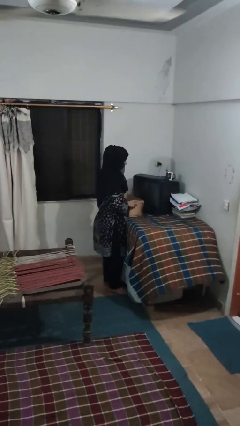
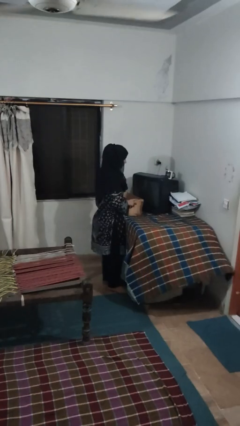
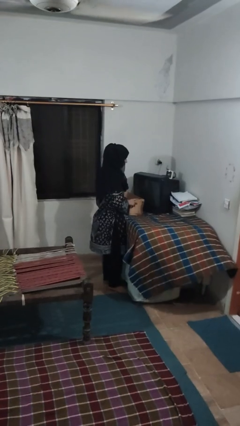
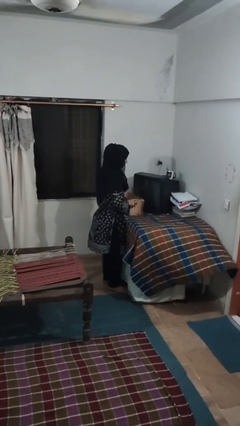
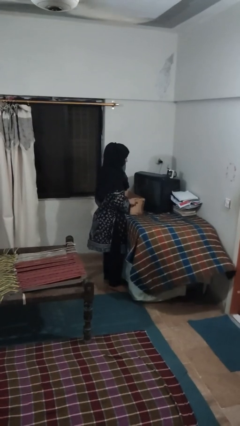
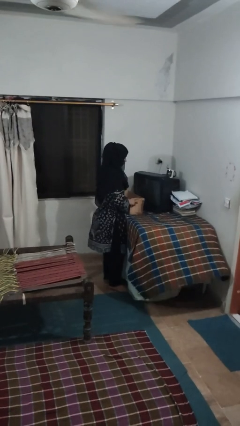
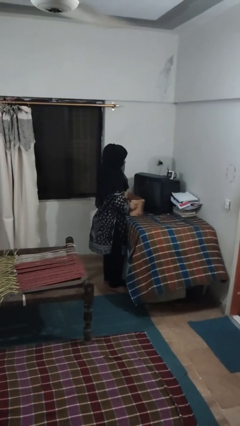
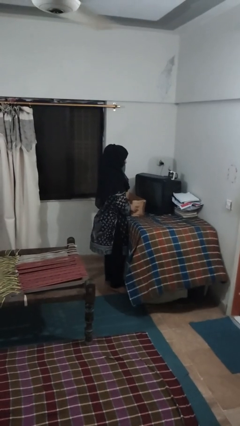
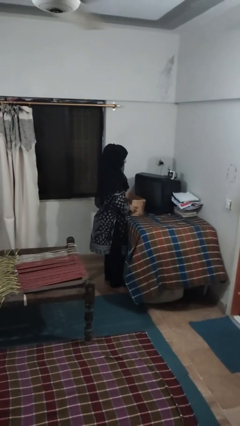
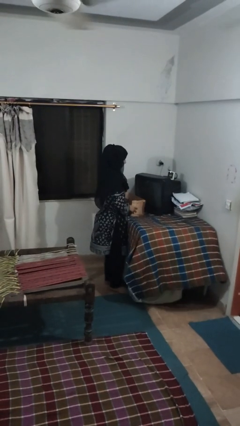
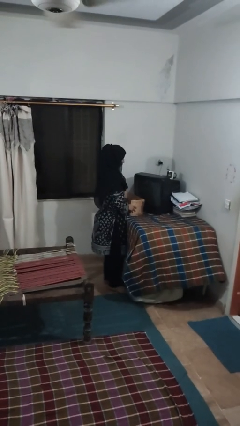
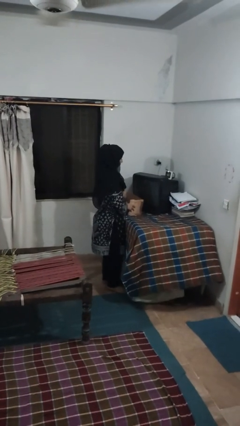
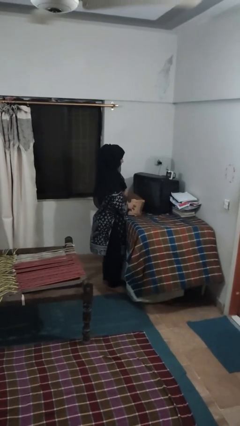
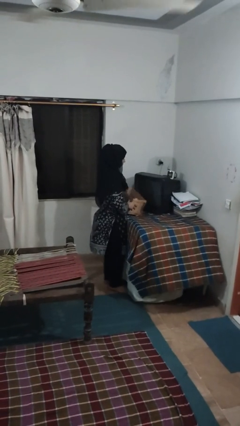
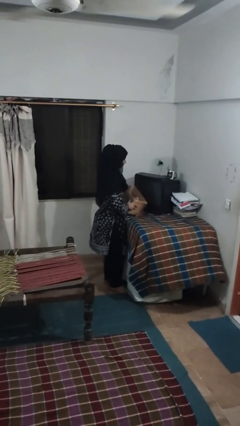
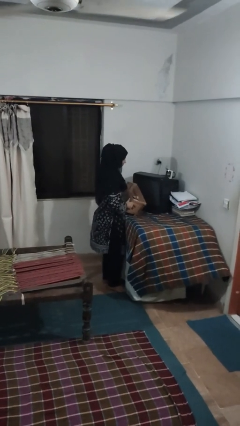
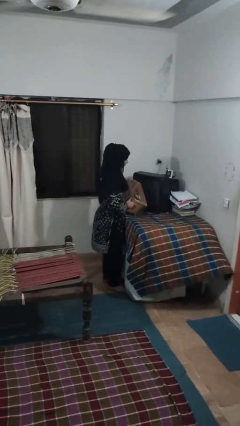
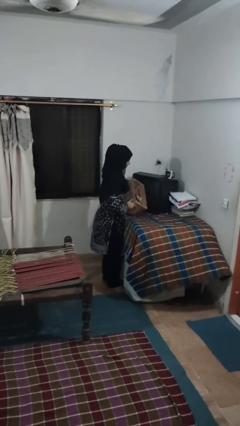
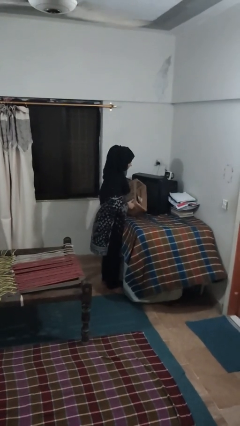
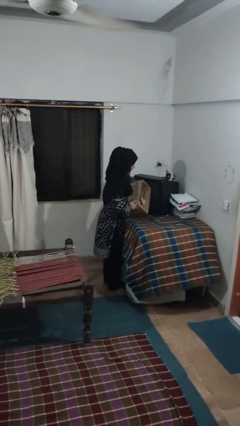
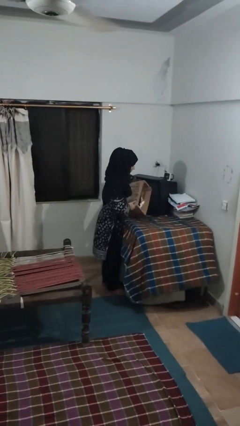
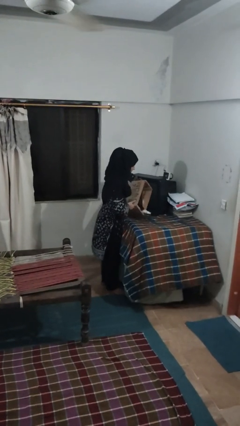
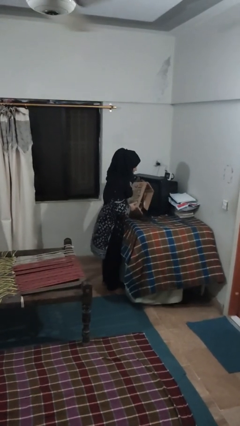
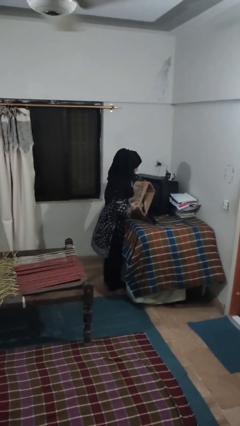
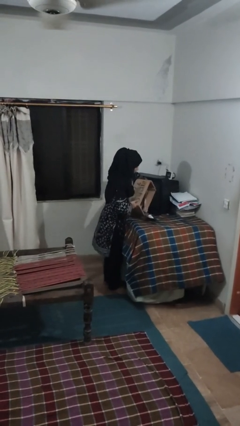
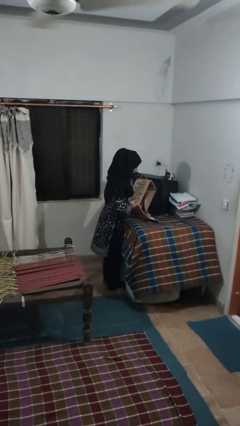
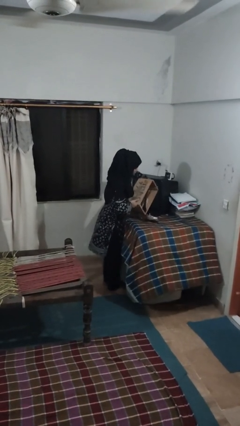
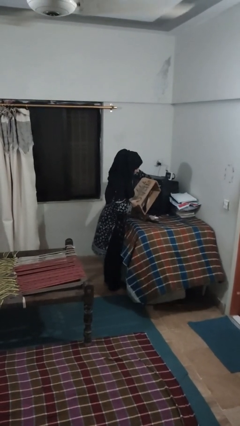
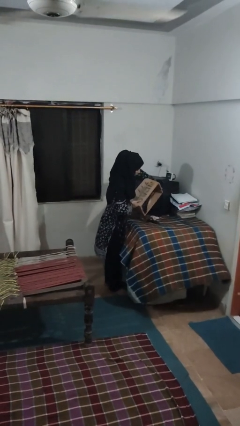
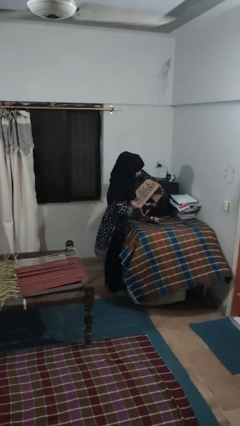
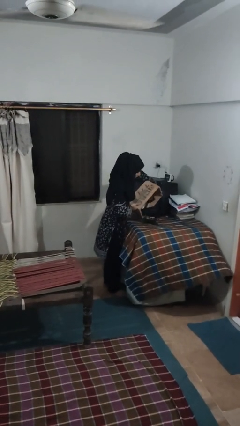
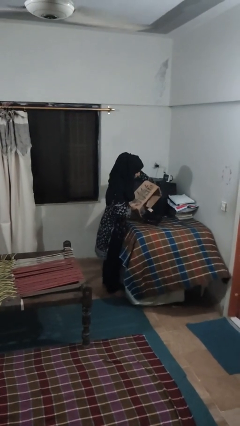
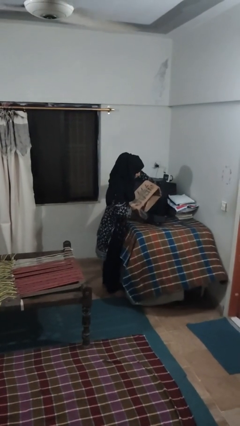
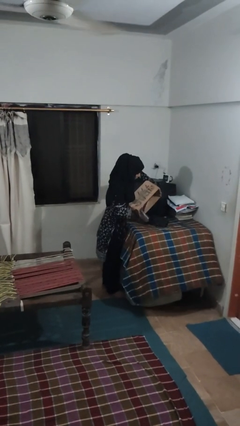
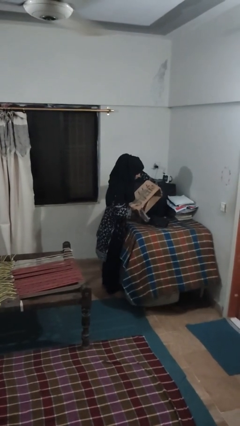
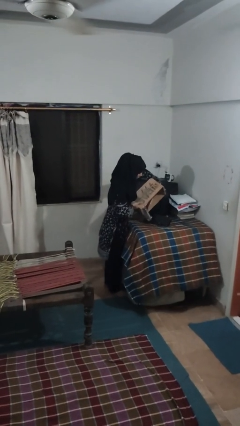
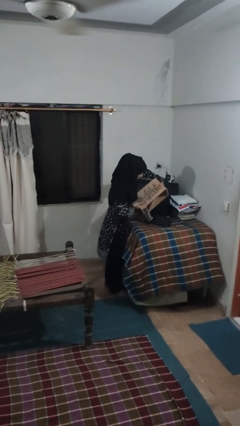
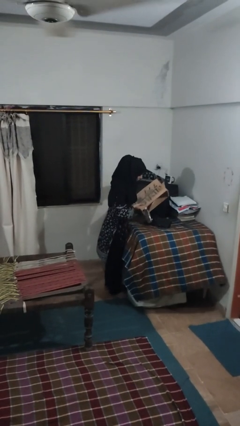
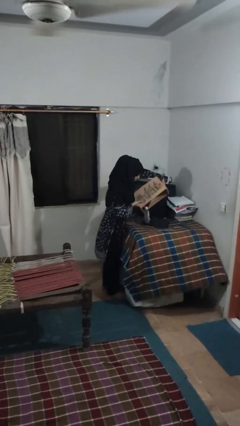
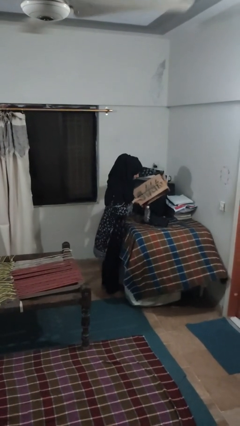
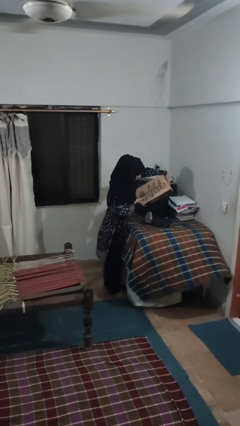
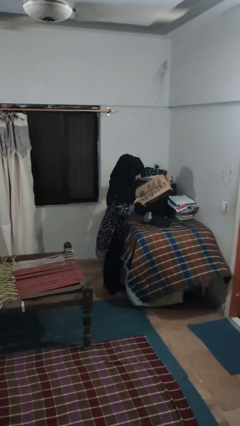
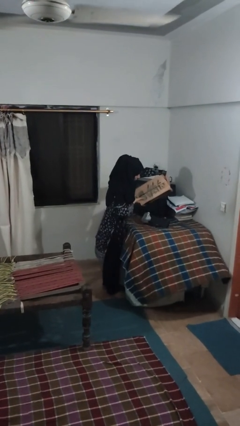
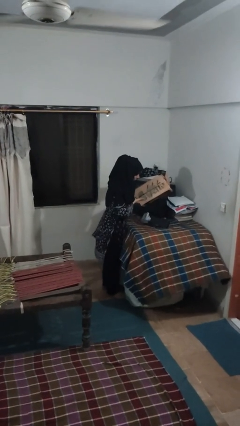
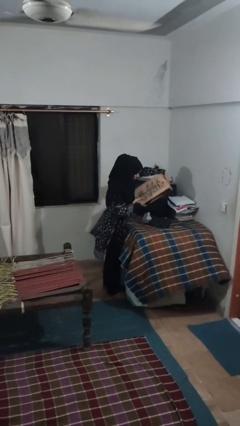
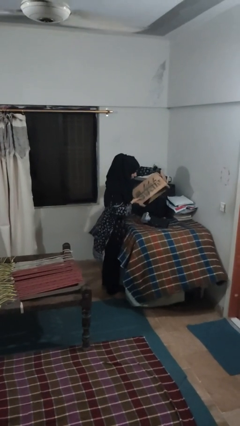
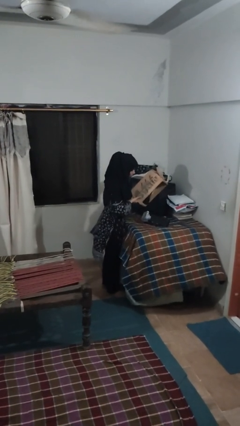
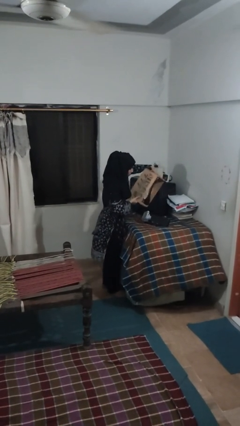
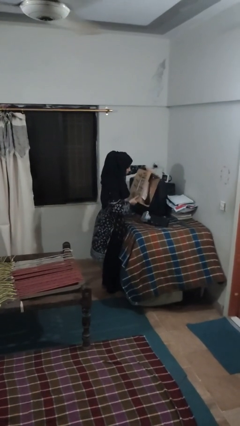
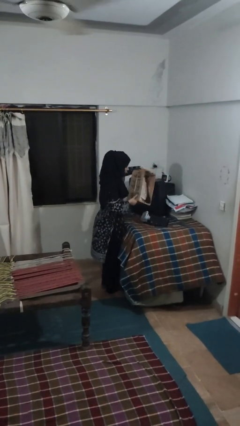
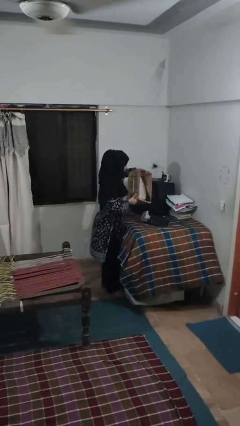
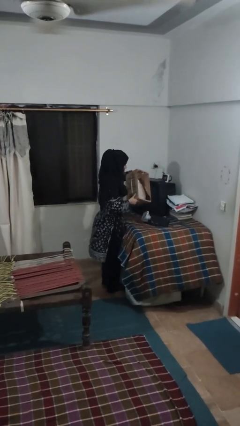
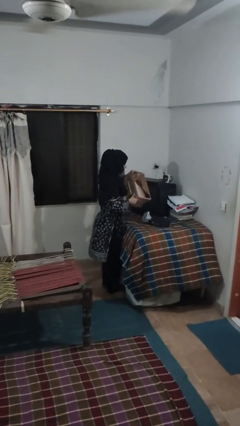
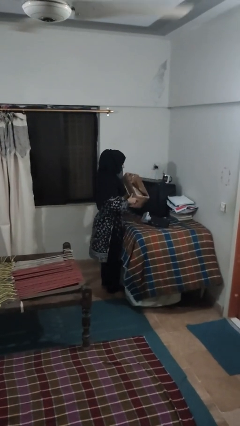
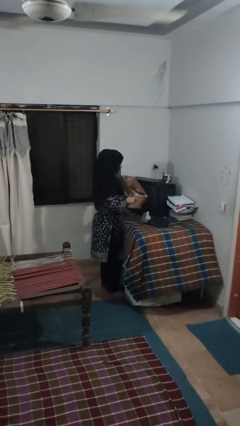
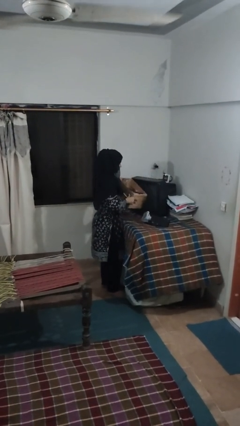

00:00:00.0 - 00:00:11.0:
person unloads box onto table

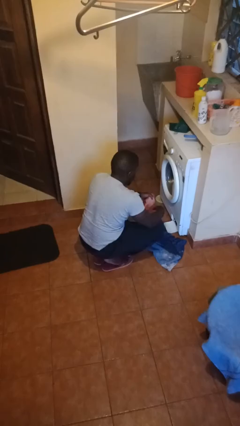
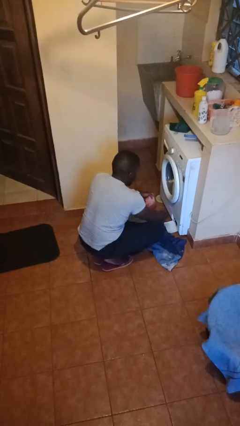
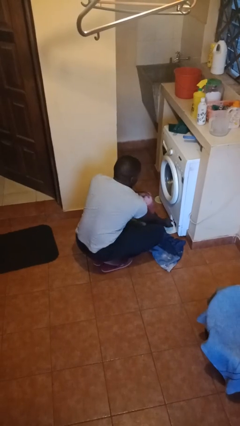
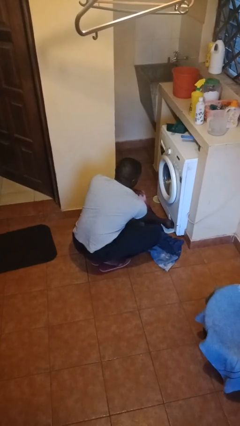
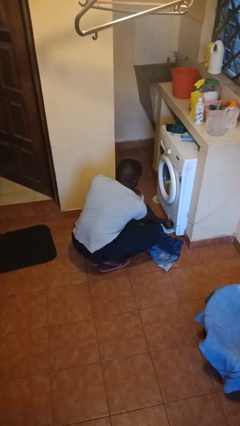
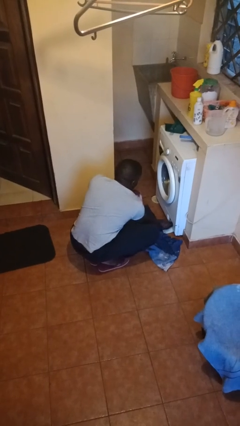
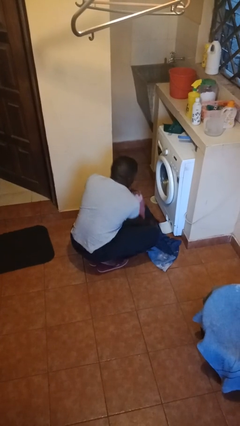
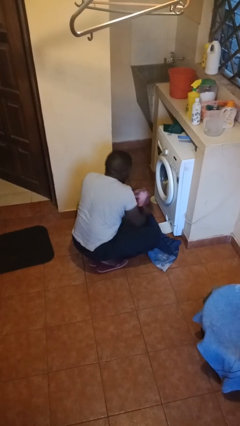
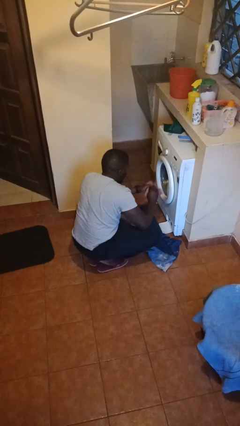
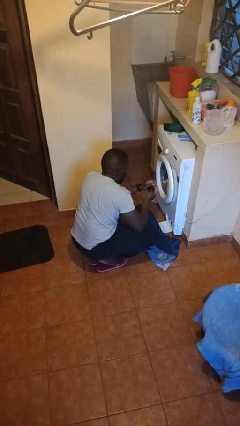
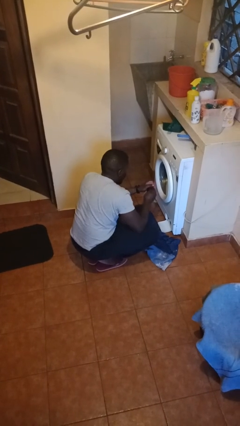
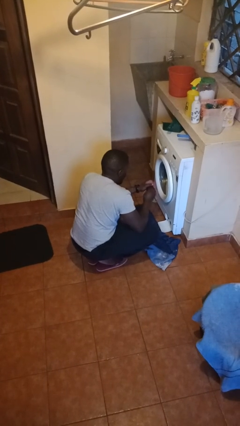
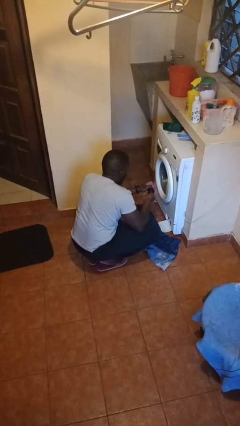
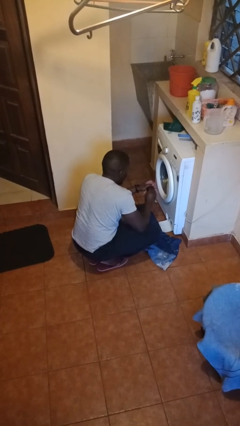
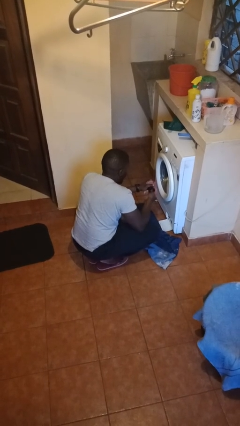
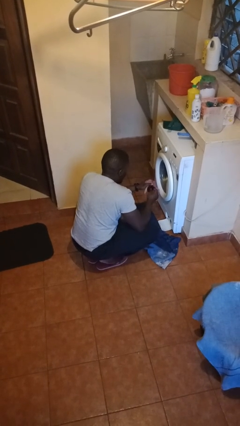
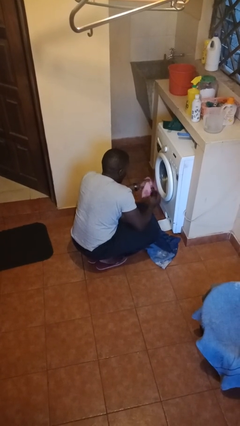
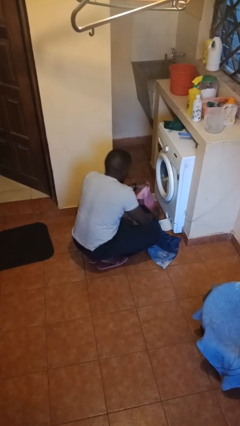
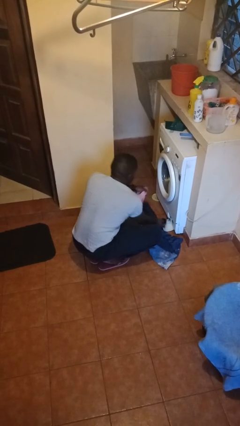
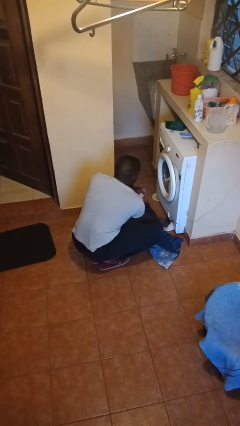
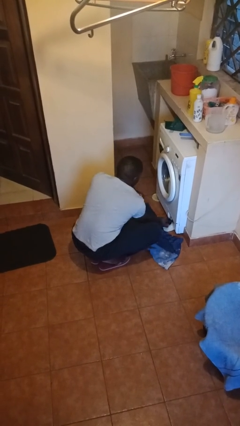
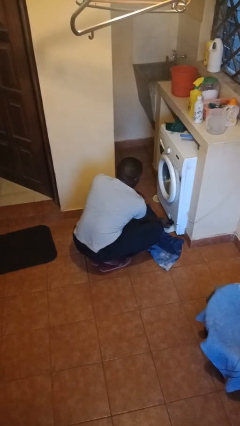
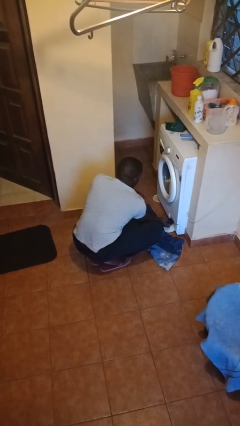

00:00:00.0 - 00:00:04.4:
person cleans dryer lint trap

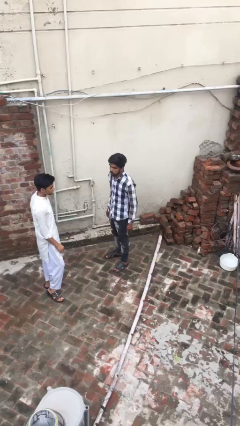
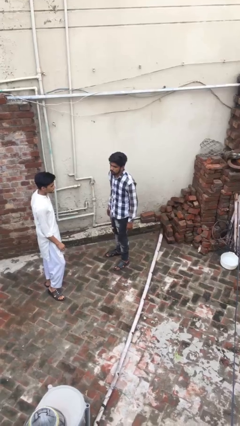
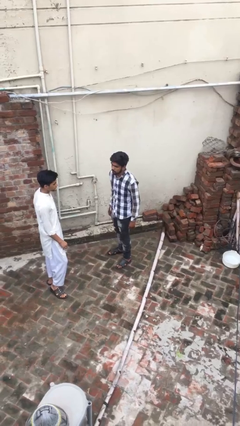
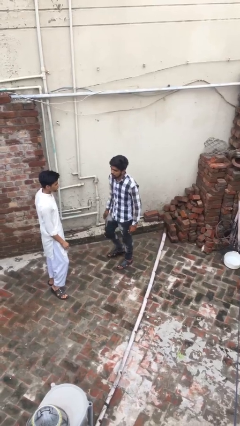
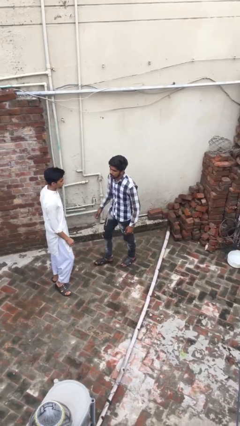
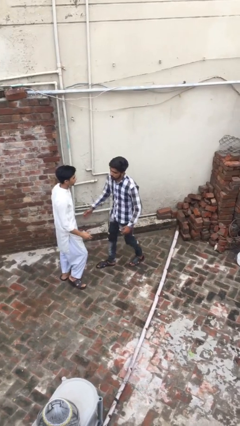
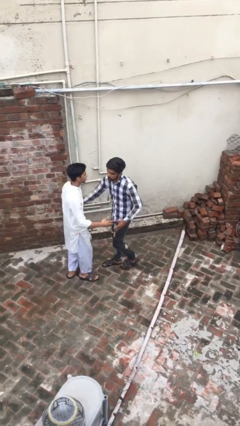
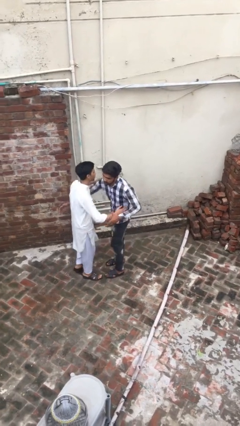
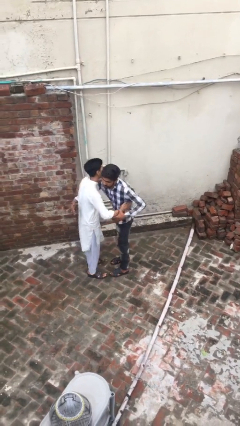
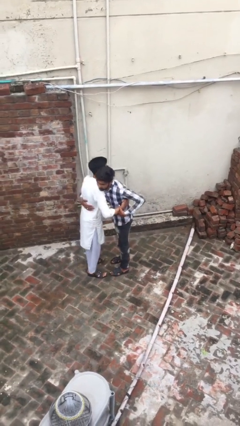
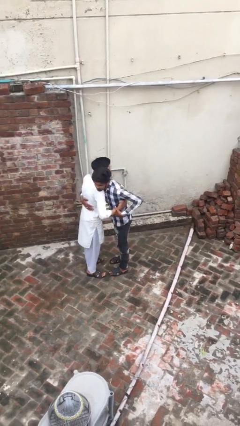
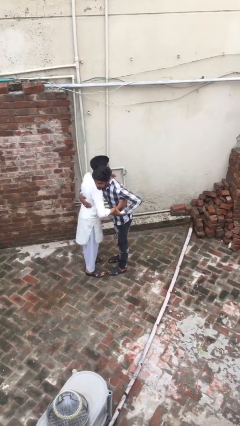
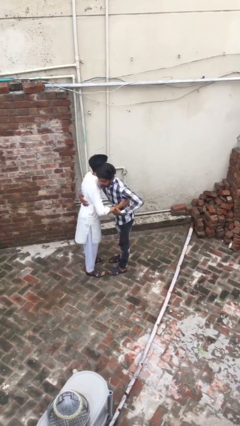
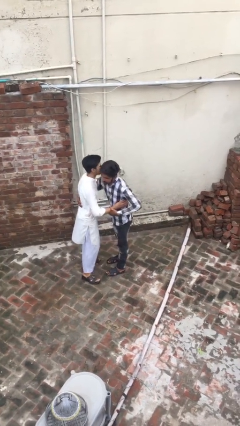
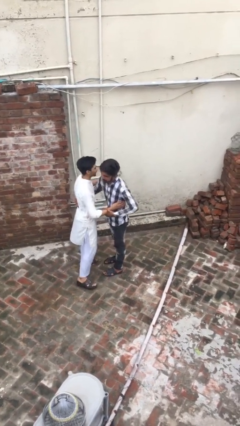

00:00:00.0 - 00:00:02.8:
person embraces person
